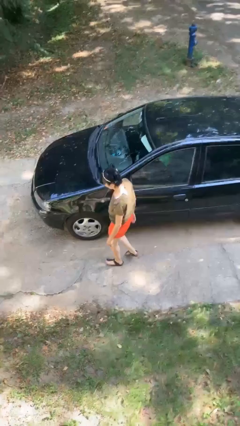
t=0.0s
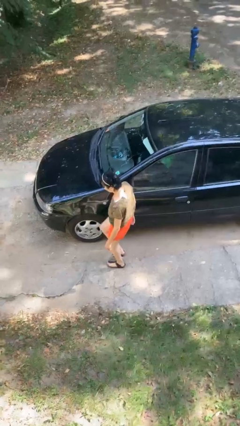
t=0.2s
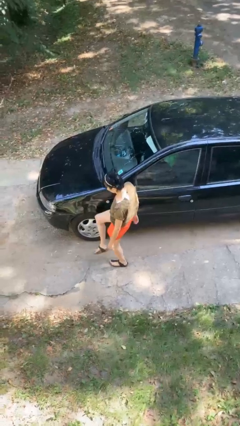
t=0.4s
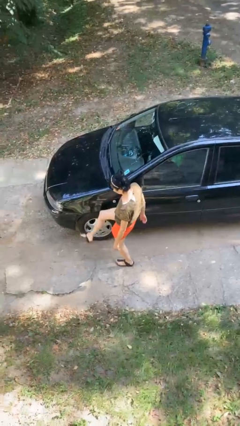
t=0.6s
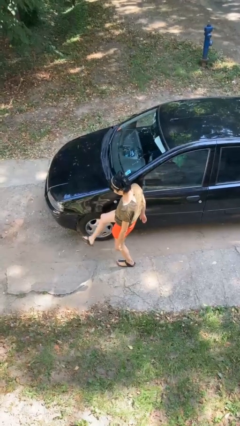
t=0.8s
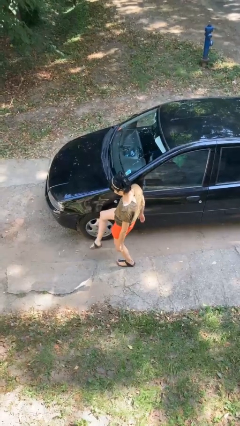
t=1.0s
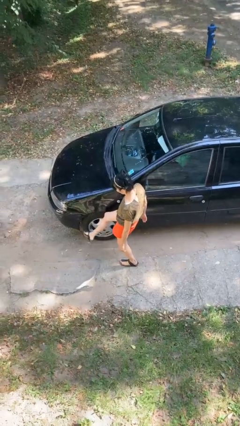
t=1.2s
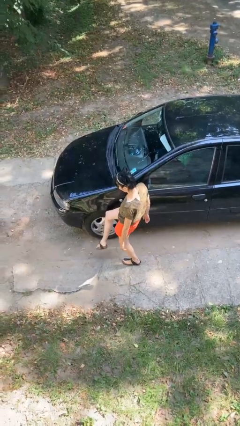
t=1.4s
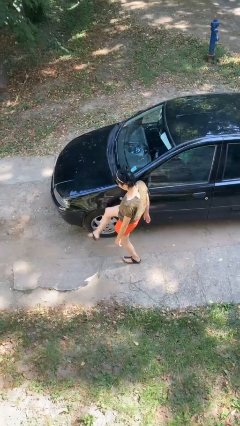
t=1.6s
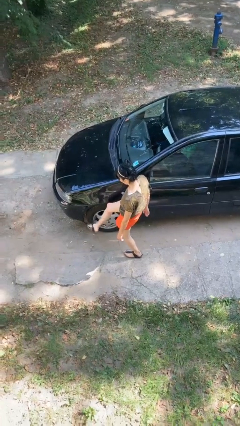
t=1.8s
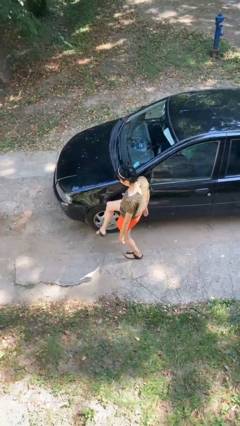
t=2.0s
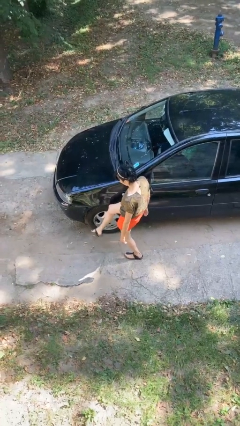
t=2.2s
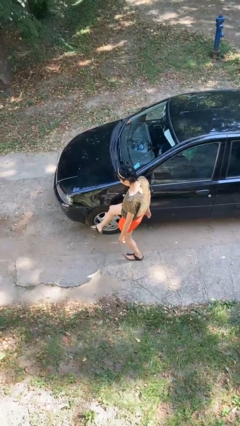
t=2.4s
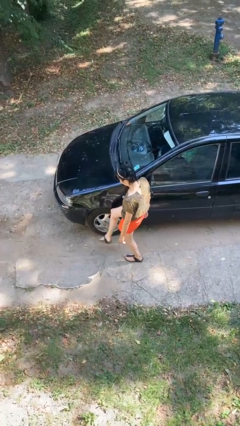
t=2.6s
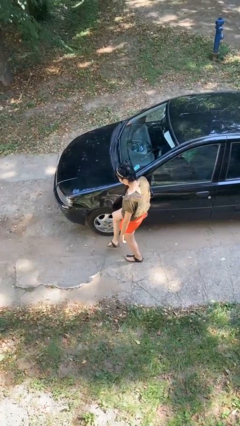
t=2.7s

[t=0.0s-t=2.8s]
person kicks car tires

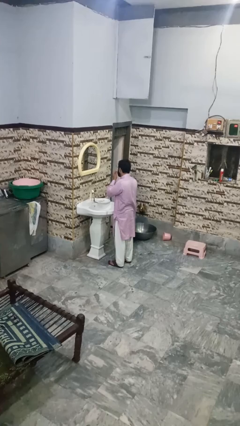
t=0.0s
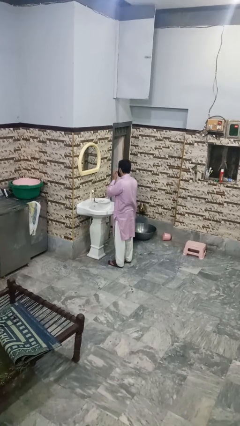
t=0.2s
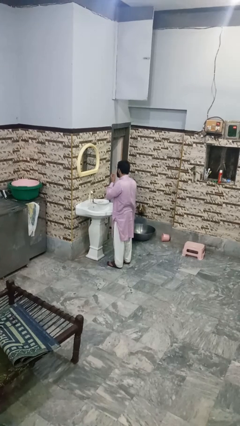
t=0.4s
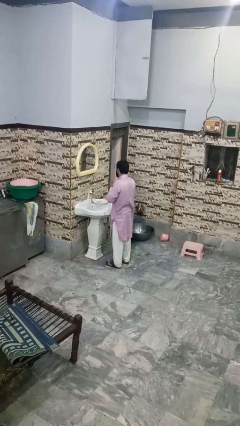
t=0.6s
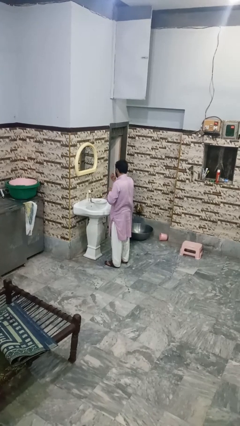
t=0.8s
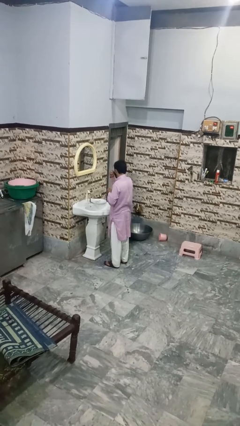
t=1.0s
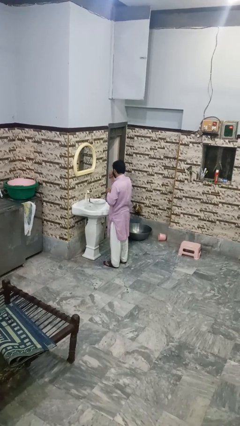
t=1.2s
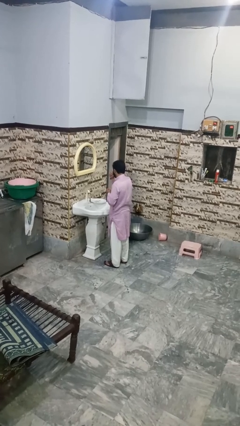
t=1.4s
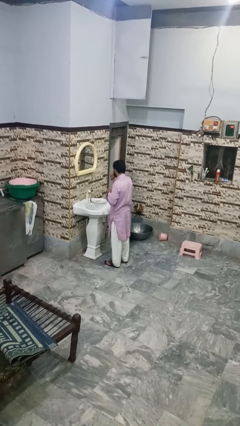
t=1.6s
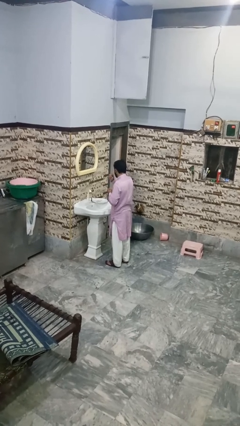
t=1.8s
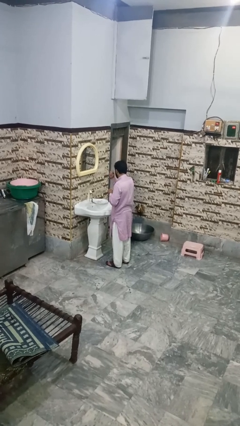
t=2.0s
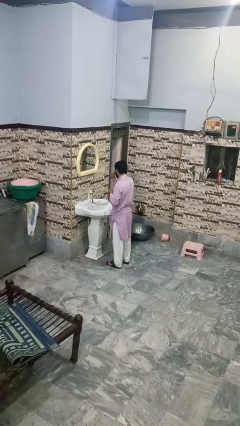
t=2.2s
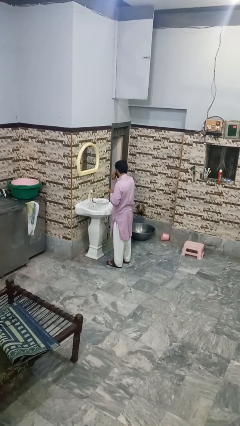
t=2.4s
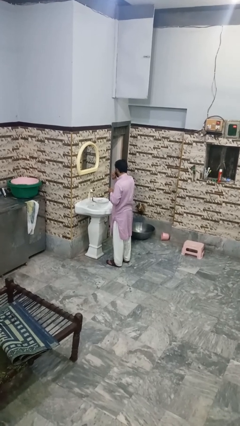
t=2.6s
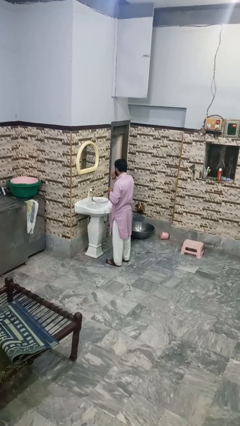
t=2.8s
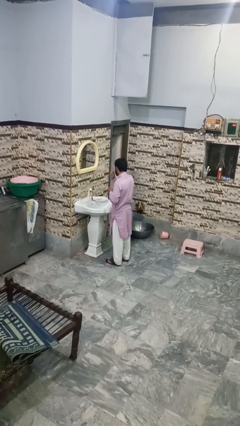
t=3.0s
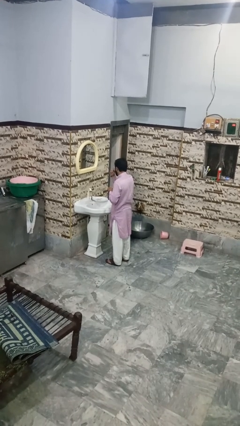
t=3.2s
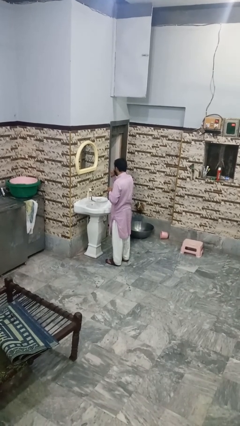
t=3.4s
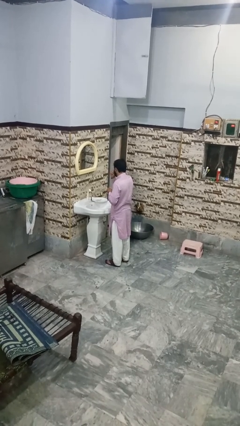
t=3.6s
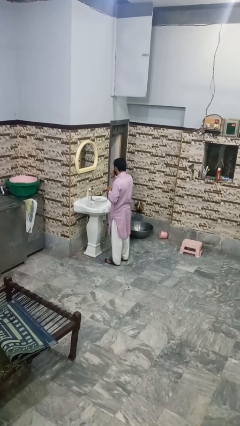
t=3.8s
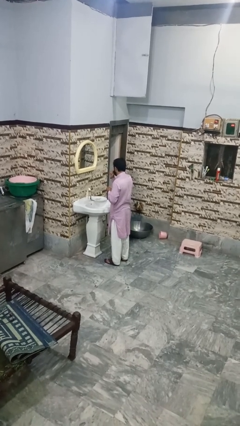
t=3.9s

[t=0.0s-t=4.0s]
person shaves face

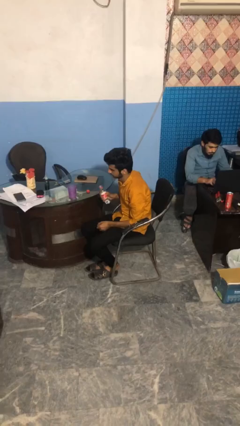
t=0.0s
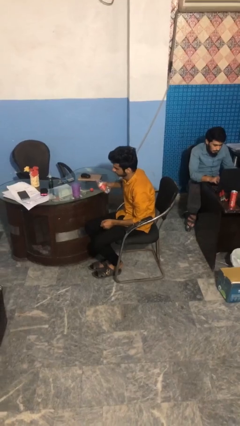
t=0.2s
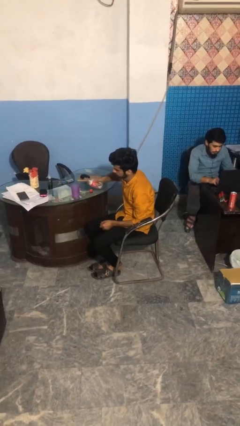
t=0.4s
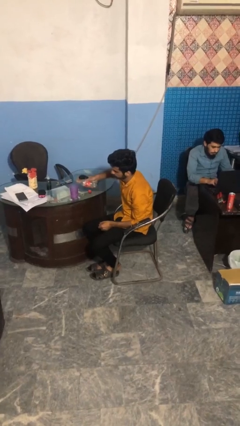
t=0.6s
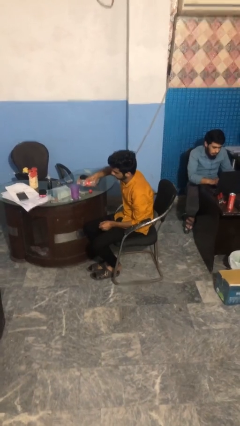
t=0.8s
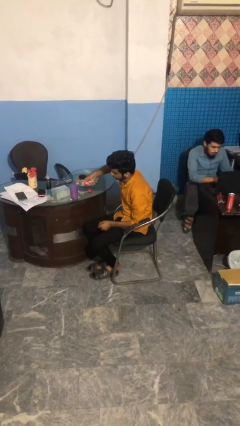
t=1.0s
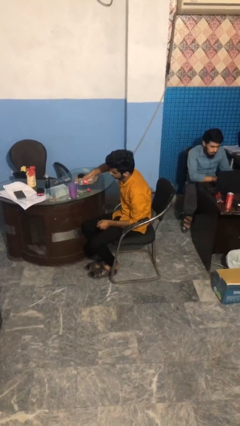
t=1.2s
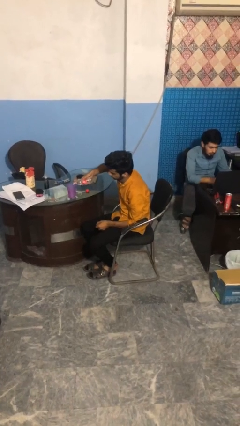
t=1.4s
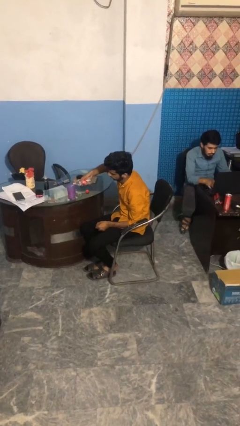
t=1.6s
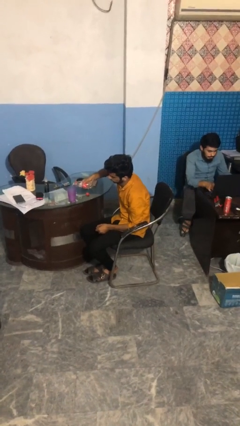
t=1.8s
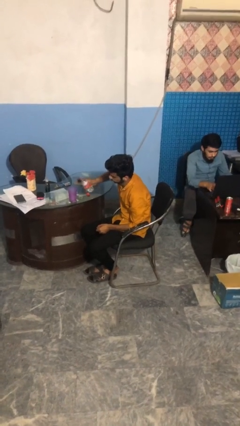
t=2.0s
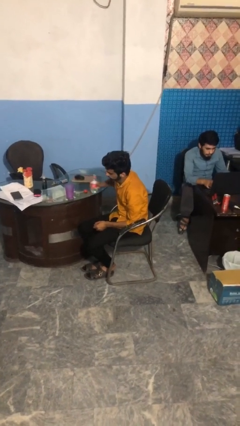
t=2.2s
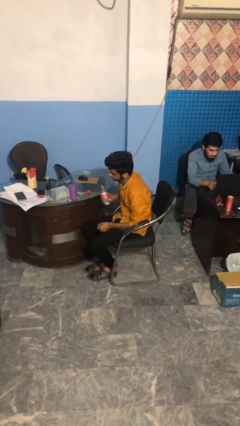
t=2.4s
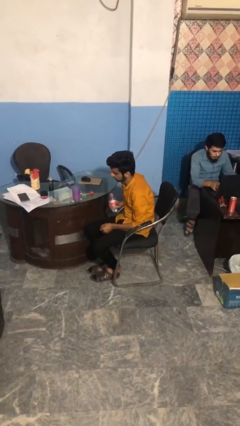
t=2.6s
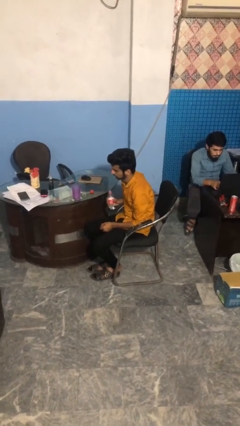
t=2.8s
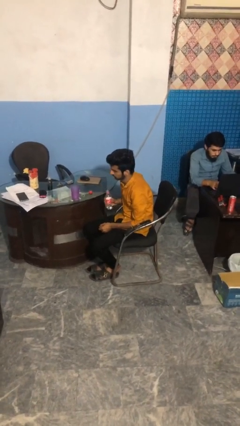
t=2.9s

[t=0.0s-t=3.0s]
person pours liquid into cup

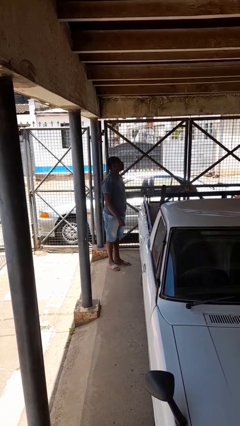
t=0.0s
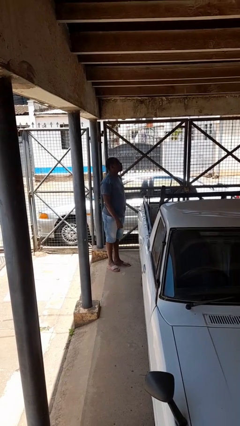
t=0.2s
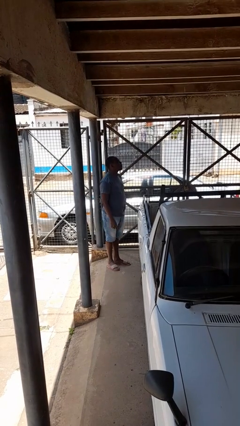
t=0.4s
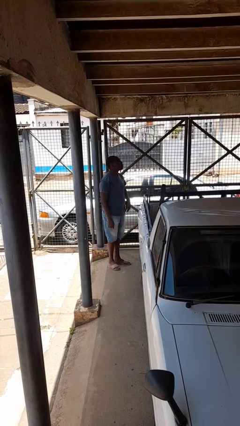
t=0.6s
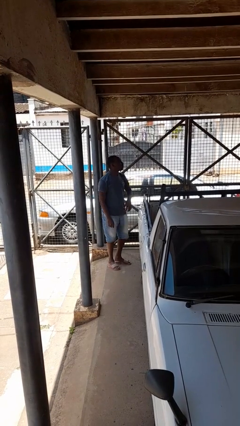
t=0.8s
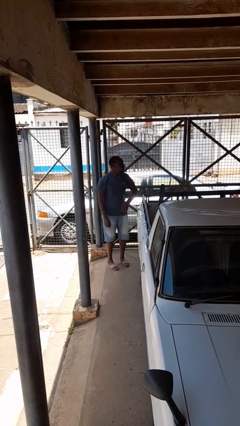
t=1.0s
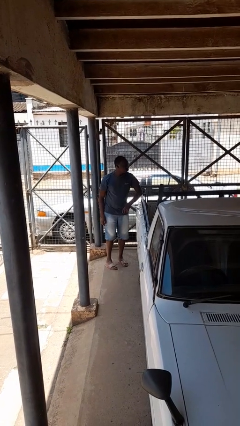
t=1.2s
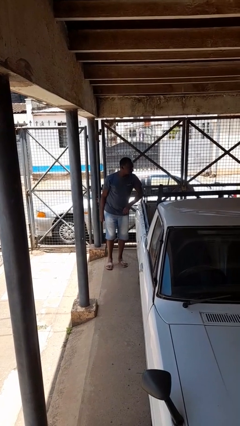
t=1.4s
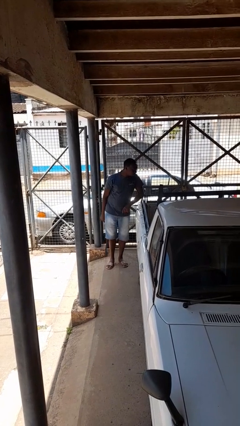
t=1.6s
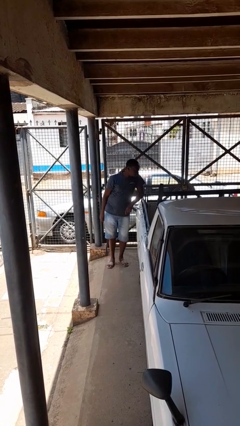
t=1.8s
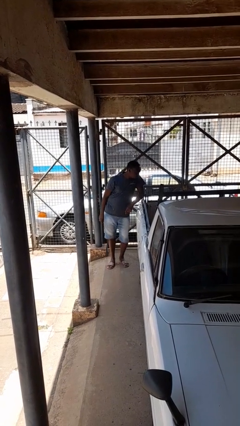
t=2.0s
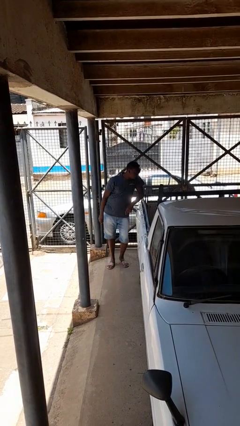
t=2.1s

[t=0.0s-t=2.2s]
person leans against car

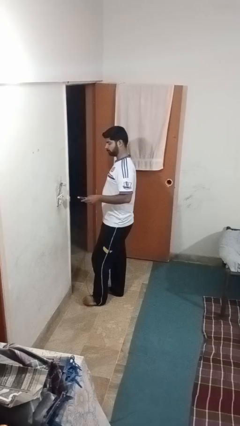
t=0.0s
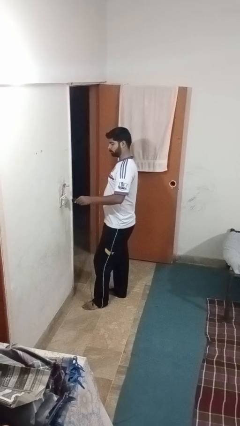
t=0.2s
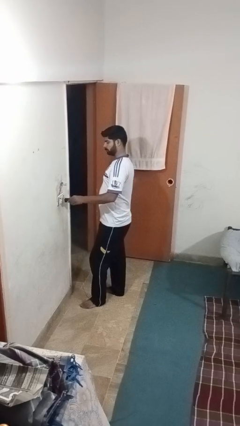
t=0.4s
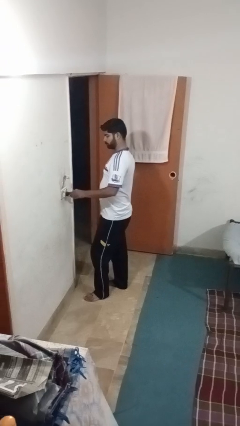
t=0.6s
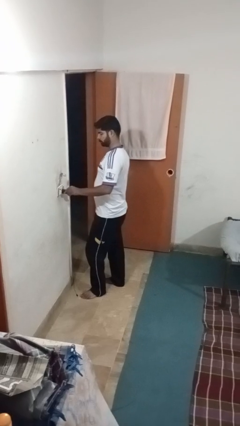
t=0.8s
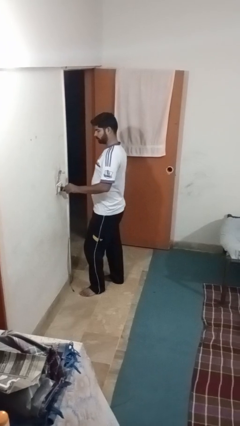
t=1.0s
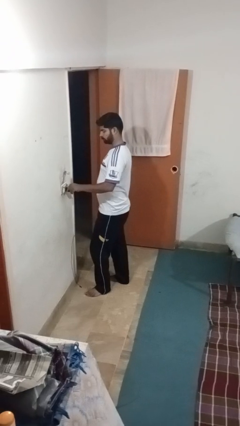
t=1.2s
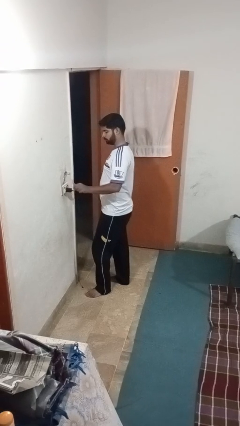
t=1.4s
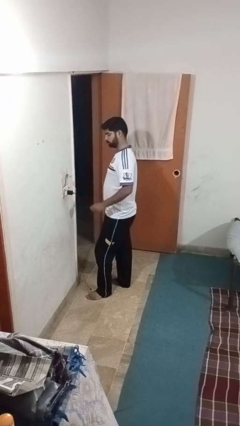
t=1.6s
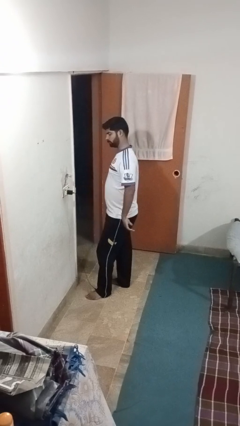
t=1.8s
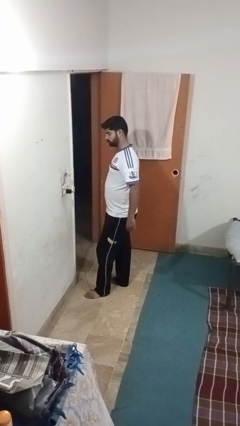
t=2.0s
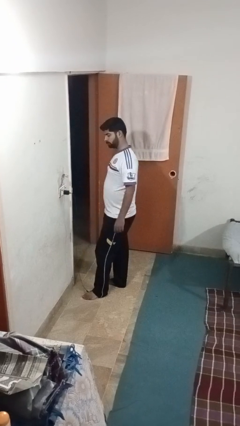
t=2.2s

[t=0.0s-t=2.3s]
person plugs into electrical socket

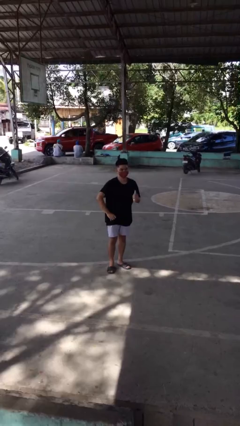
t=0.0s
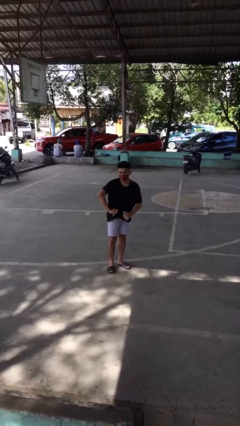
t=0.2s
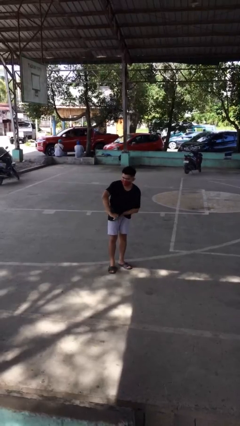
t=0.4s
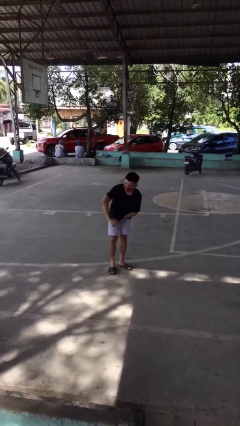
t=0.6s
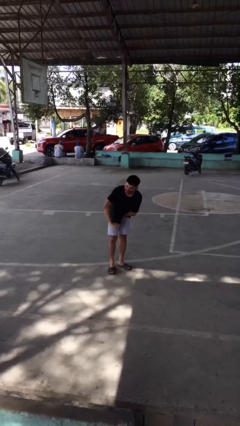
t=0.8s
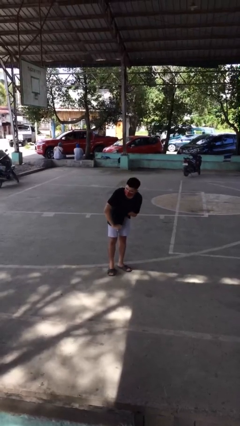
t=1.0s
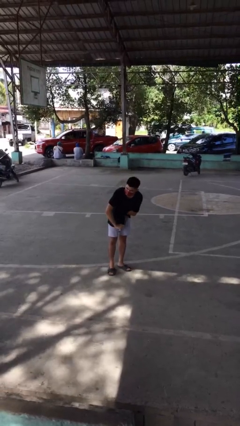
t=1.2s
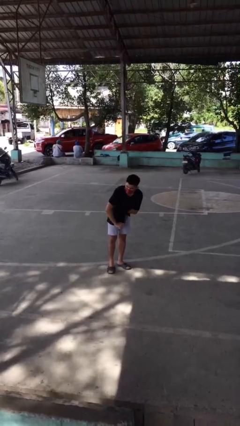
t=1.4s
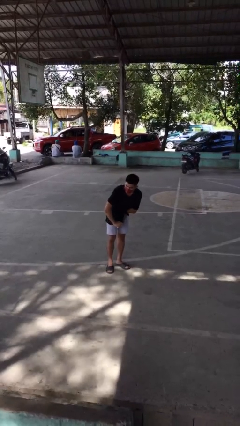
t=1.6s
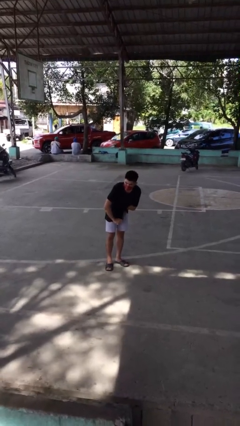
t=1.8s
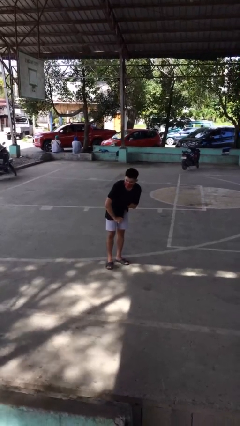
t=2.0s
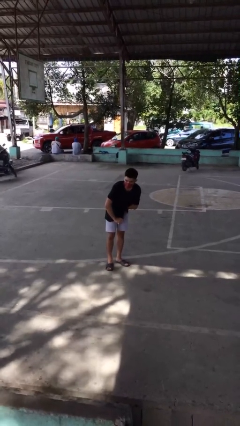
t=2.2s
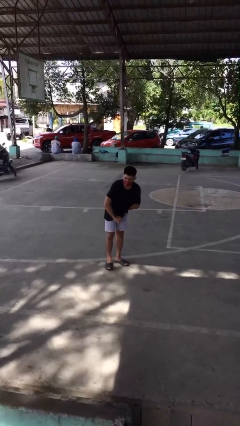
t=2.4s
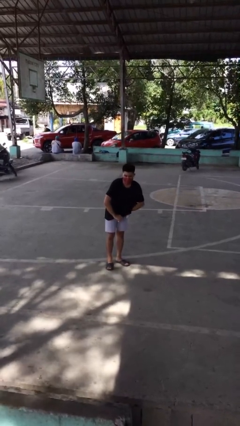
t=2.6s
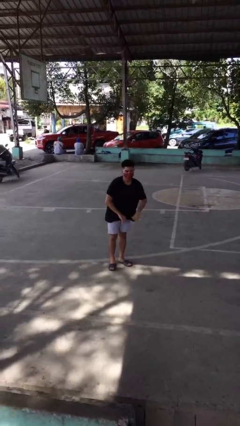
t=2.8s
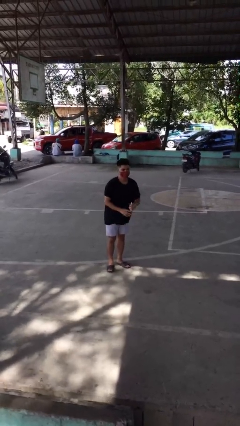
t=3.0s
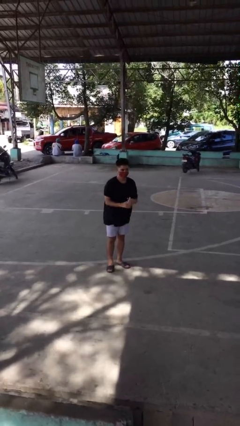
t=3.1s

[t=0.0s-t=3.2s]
person applies deodorant
